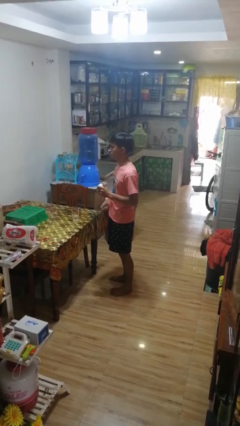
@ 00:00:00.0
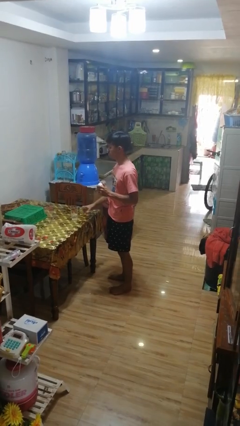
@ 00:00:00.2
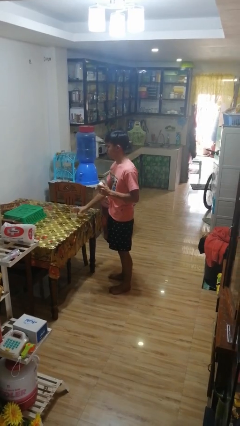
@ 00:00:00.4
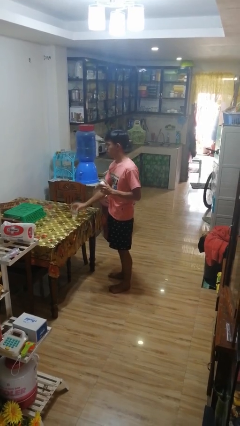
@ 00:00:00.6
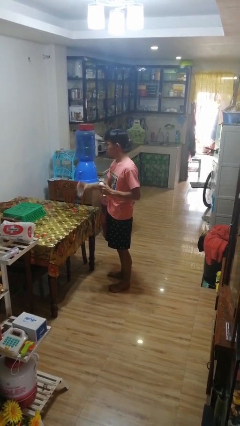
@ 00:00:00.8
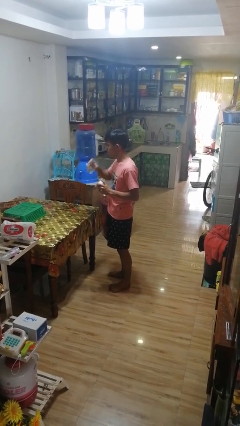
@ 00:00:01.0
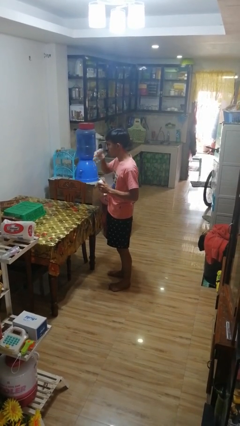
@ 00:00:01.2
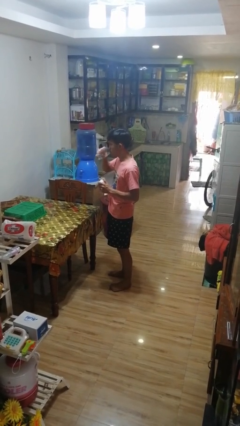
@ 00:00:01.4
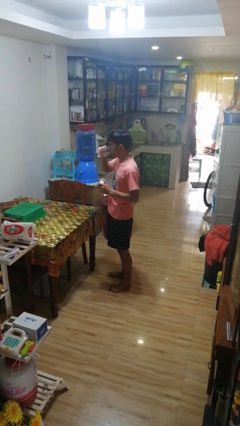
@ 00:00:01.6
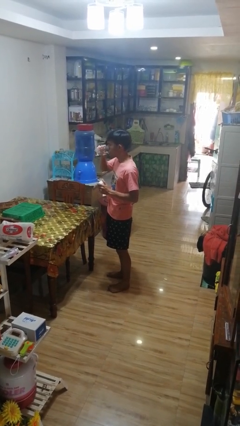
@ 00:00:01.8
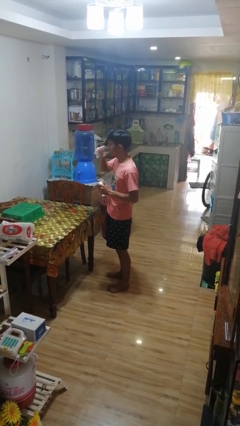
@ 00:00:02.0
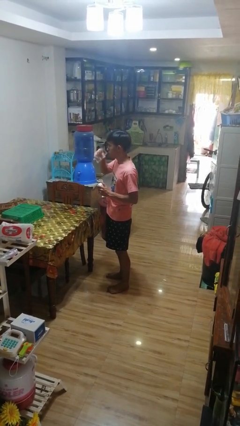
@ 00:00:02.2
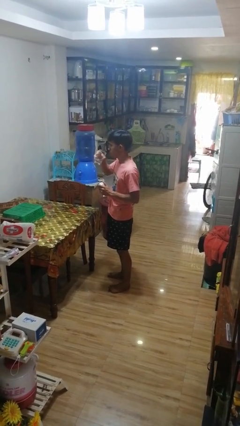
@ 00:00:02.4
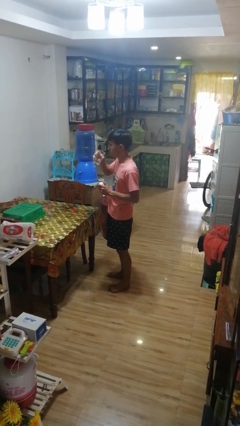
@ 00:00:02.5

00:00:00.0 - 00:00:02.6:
person drinks from cup

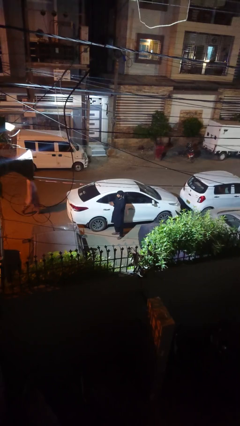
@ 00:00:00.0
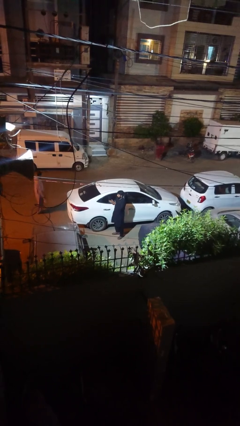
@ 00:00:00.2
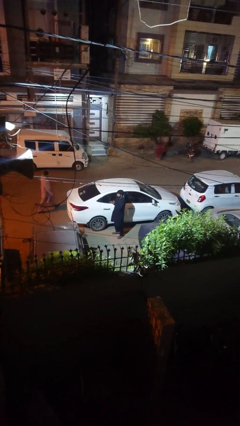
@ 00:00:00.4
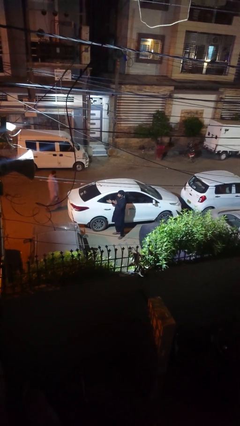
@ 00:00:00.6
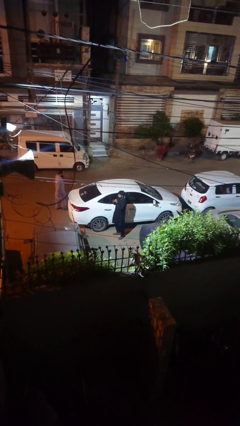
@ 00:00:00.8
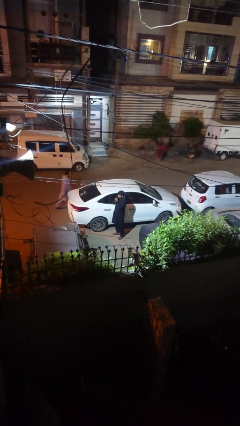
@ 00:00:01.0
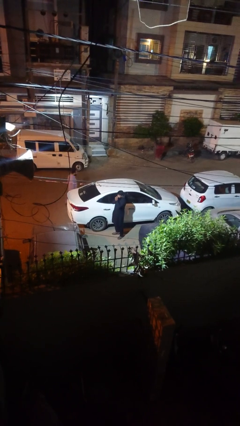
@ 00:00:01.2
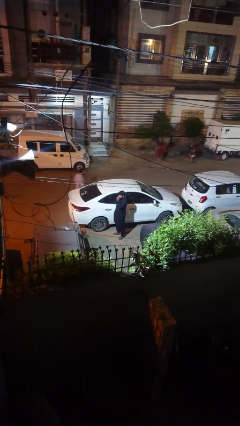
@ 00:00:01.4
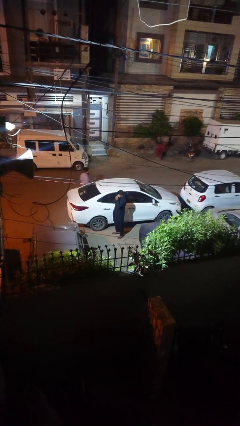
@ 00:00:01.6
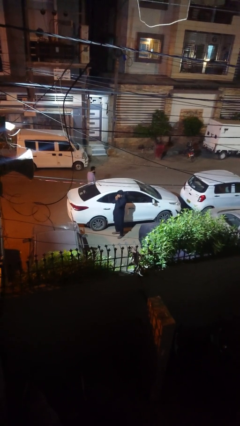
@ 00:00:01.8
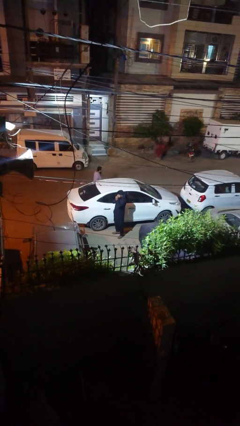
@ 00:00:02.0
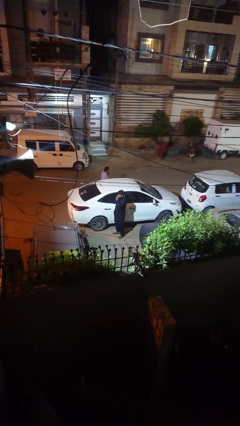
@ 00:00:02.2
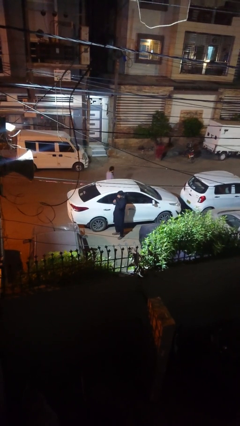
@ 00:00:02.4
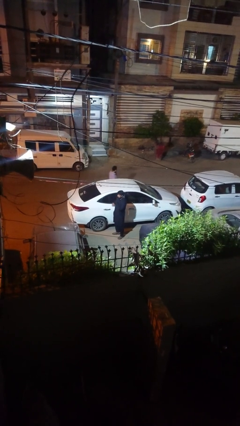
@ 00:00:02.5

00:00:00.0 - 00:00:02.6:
person blows into hands

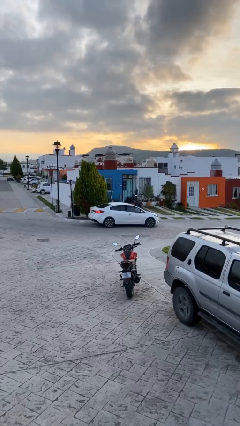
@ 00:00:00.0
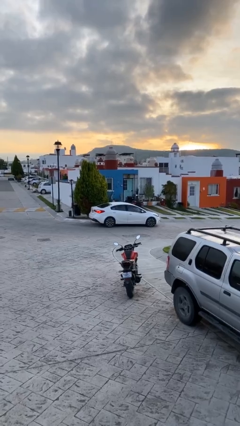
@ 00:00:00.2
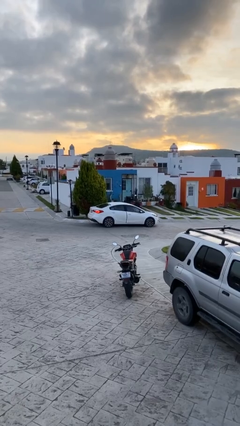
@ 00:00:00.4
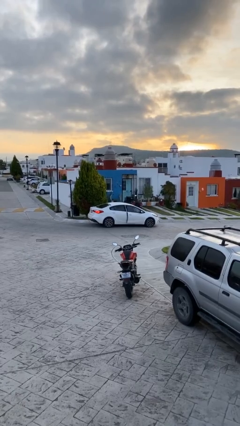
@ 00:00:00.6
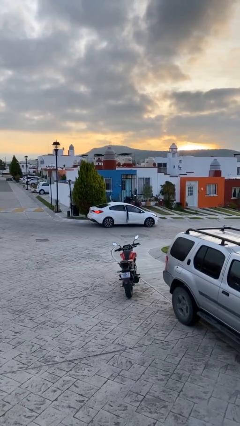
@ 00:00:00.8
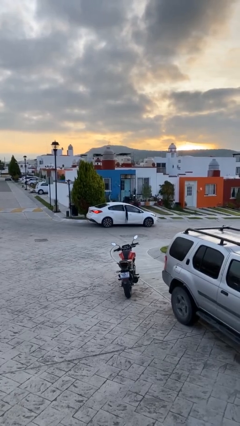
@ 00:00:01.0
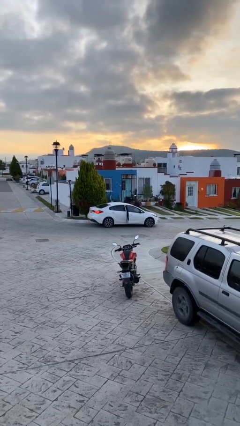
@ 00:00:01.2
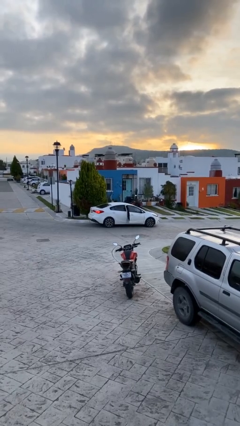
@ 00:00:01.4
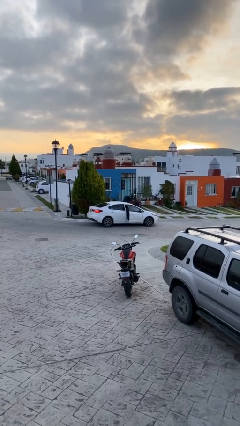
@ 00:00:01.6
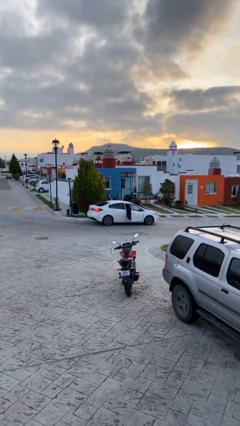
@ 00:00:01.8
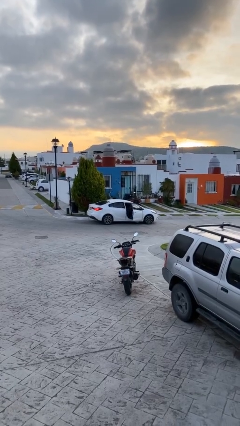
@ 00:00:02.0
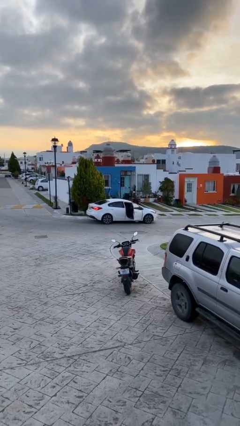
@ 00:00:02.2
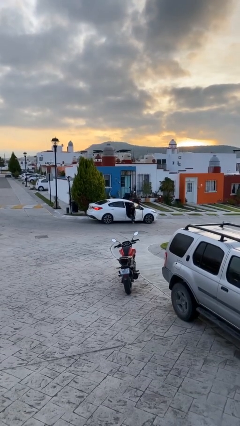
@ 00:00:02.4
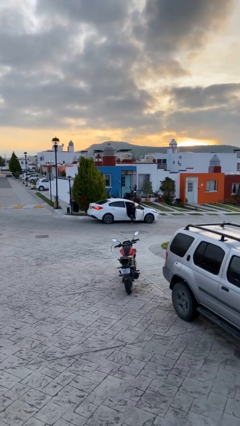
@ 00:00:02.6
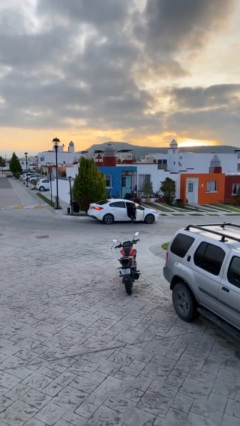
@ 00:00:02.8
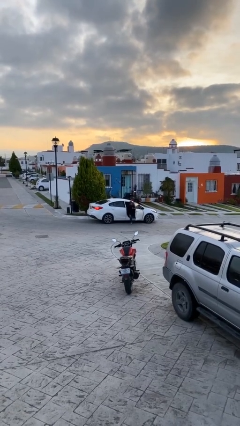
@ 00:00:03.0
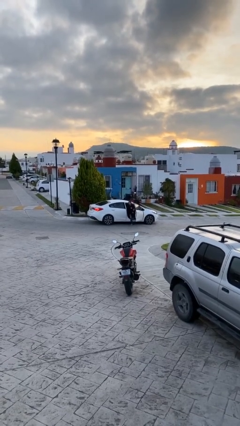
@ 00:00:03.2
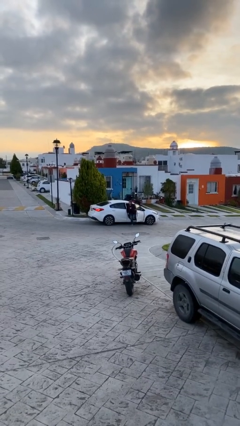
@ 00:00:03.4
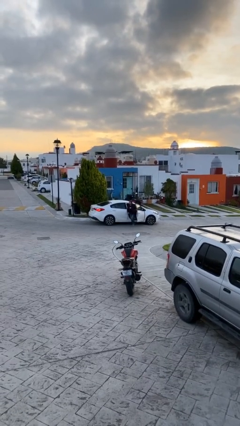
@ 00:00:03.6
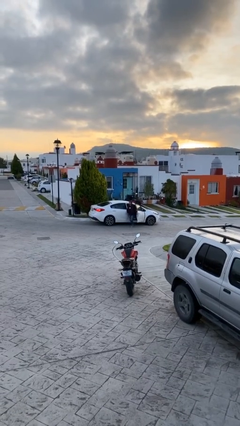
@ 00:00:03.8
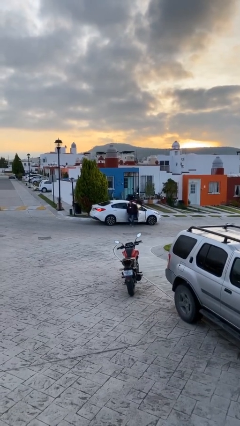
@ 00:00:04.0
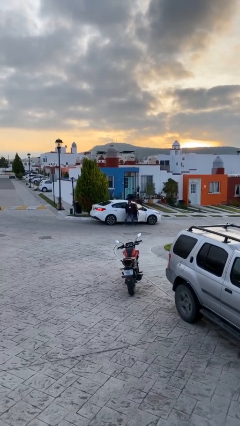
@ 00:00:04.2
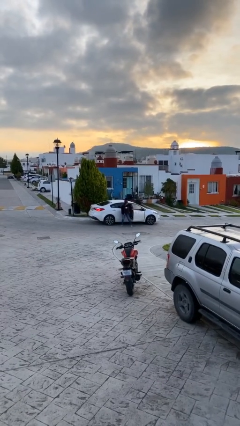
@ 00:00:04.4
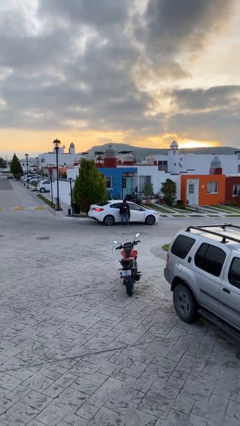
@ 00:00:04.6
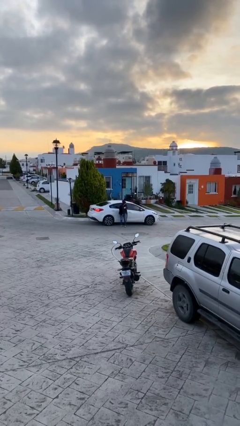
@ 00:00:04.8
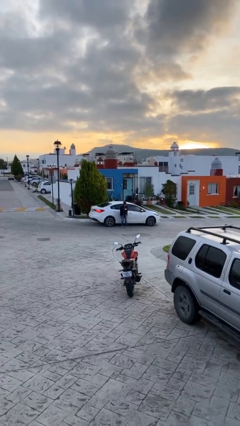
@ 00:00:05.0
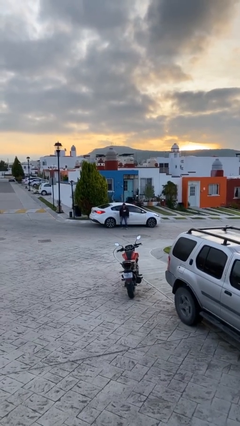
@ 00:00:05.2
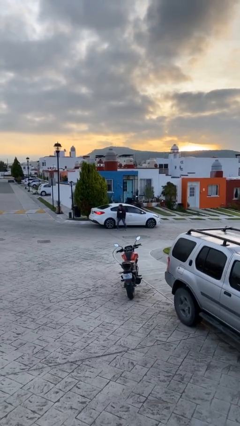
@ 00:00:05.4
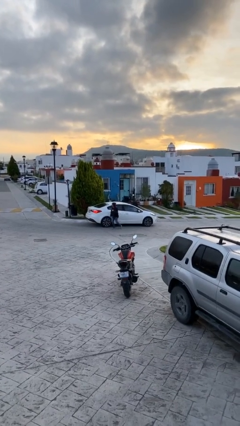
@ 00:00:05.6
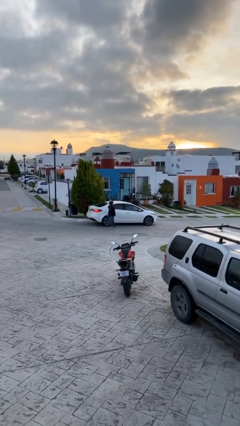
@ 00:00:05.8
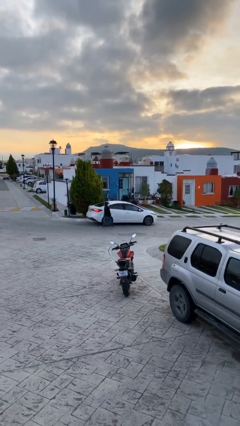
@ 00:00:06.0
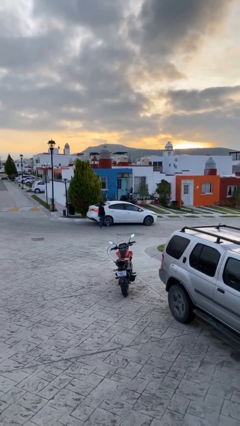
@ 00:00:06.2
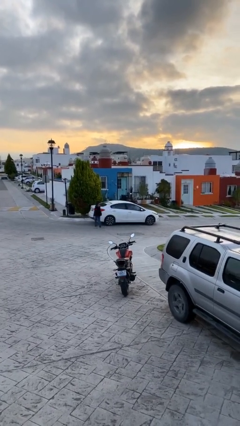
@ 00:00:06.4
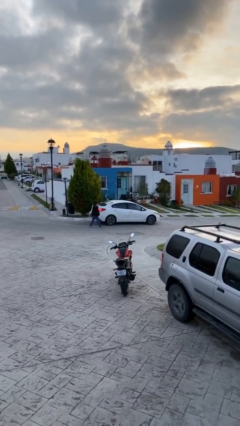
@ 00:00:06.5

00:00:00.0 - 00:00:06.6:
car drops off person

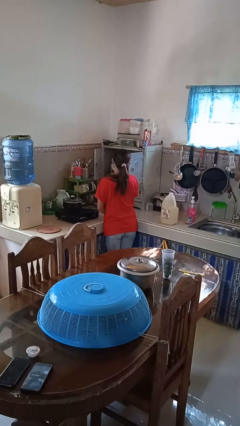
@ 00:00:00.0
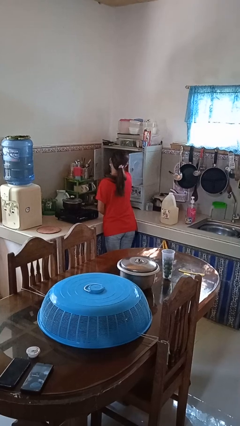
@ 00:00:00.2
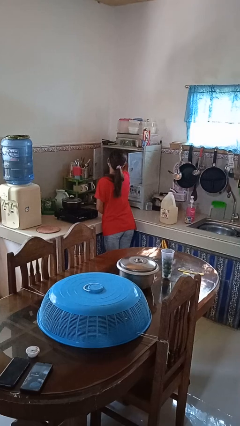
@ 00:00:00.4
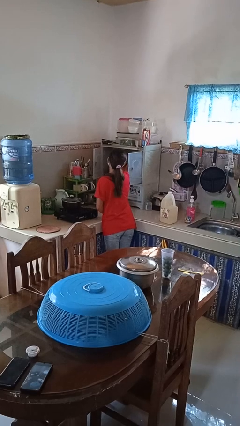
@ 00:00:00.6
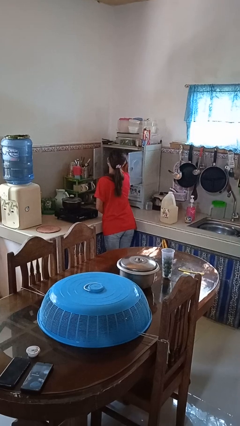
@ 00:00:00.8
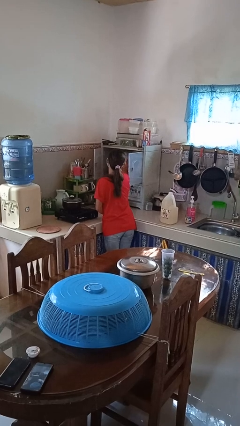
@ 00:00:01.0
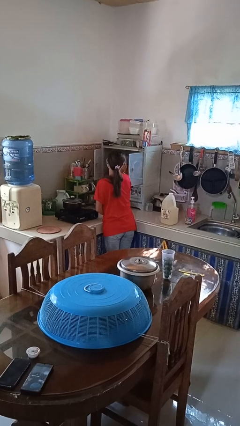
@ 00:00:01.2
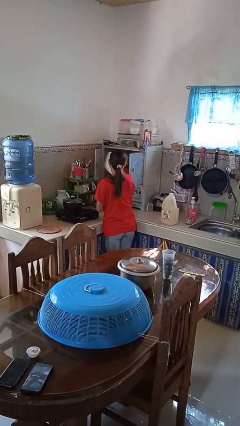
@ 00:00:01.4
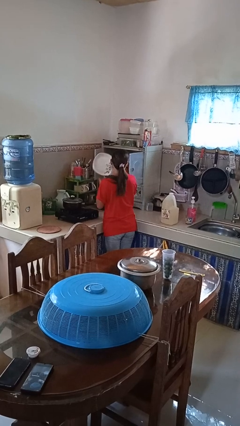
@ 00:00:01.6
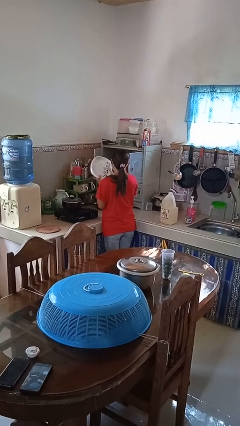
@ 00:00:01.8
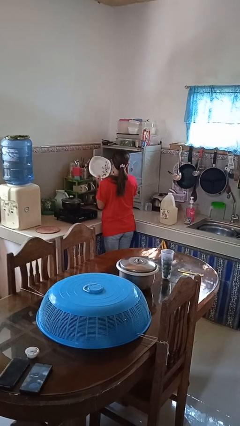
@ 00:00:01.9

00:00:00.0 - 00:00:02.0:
person takes object from cabinet

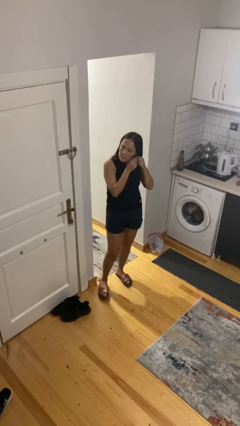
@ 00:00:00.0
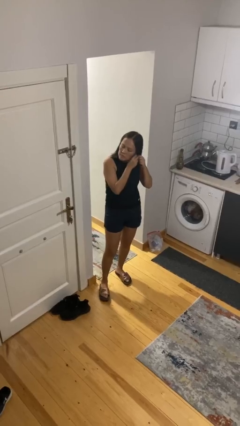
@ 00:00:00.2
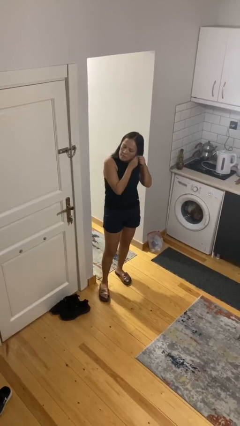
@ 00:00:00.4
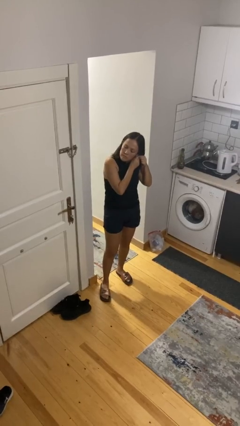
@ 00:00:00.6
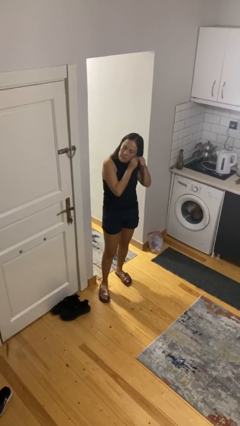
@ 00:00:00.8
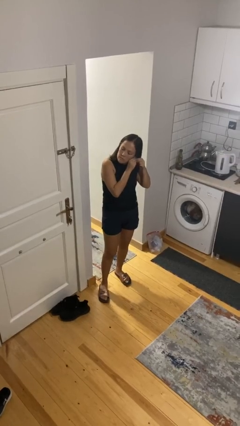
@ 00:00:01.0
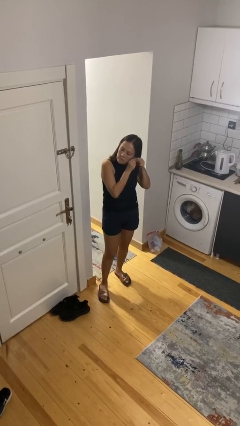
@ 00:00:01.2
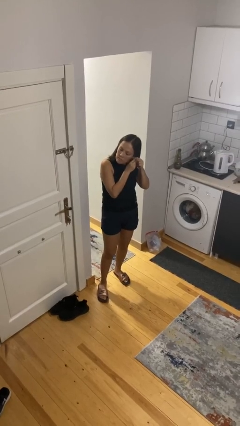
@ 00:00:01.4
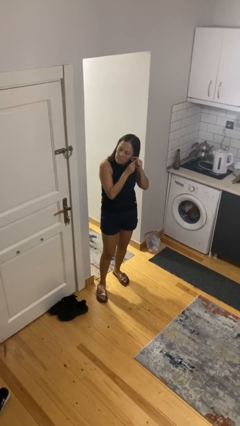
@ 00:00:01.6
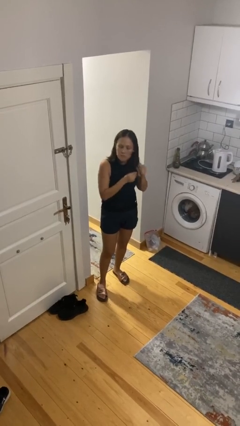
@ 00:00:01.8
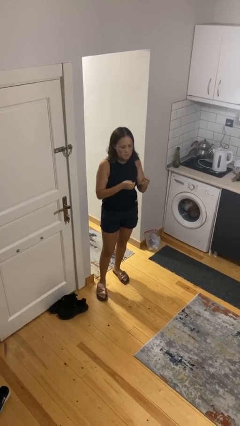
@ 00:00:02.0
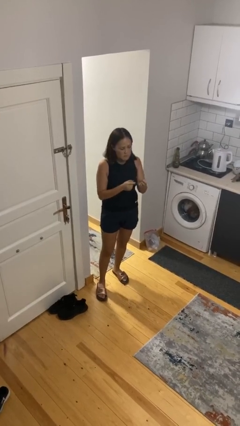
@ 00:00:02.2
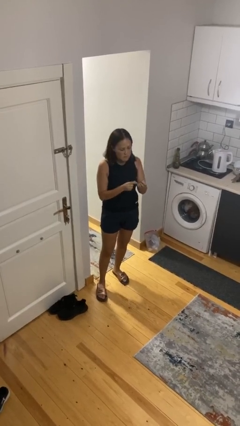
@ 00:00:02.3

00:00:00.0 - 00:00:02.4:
person takes off earrings

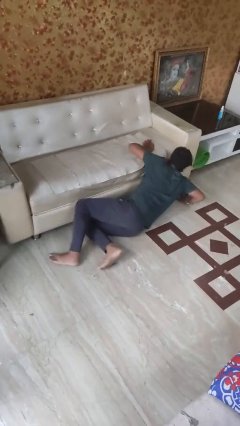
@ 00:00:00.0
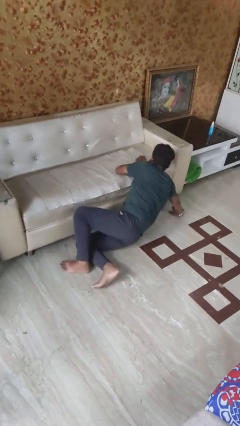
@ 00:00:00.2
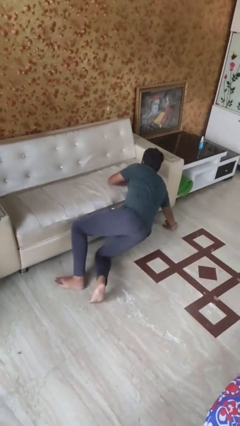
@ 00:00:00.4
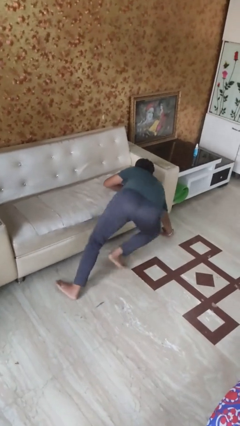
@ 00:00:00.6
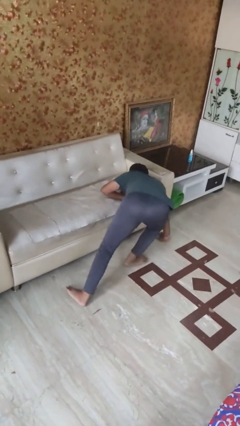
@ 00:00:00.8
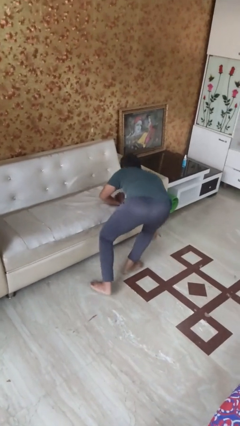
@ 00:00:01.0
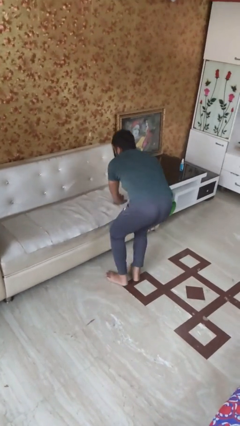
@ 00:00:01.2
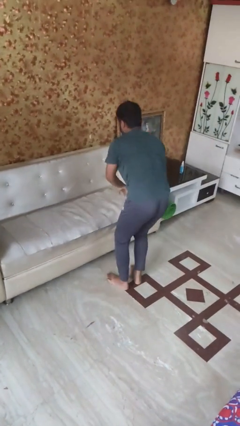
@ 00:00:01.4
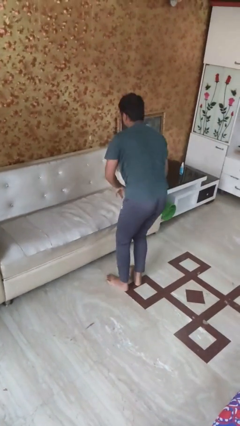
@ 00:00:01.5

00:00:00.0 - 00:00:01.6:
person stands up from floor
